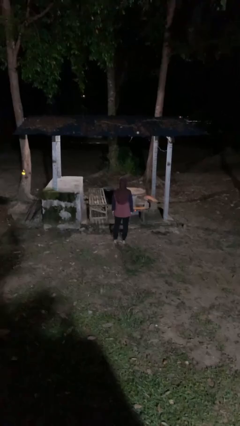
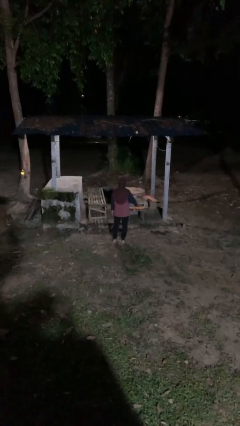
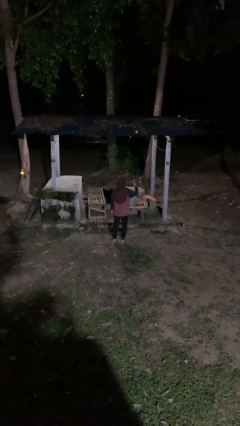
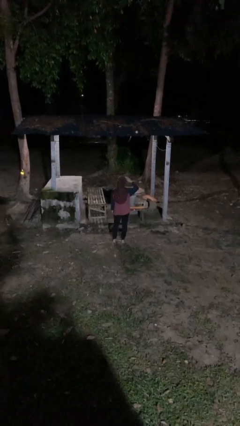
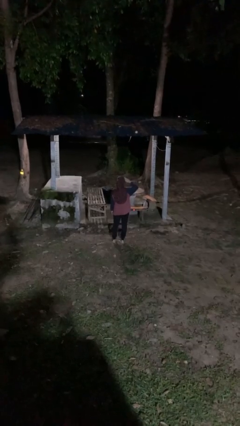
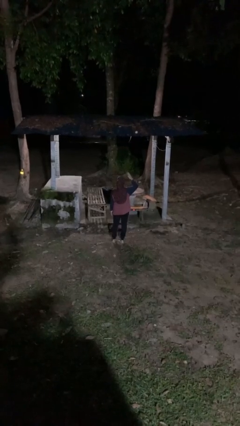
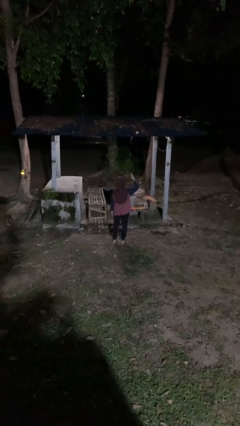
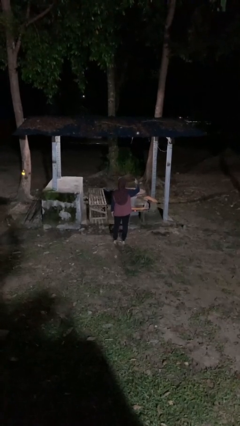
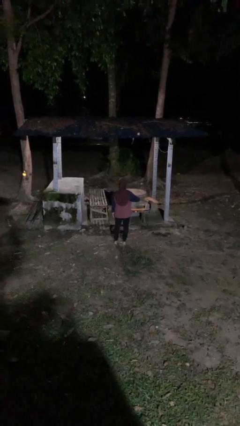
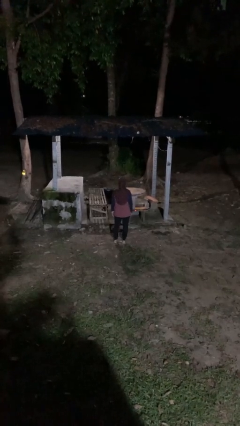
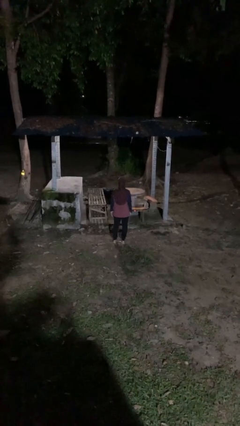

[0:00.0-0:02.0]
person salutes

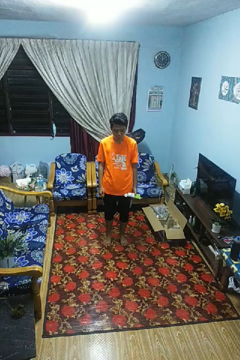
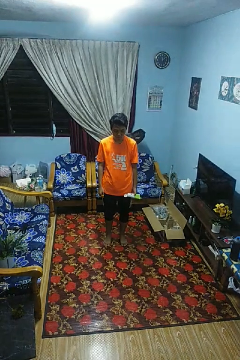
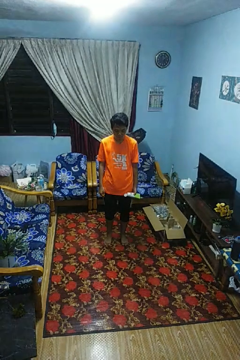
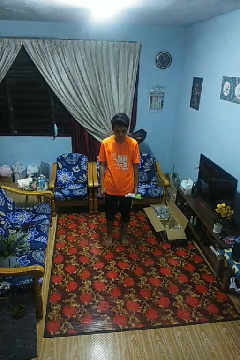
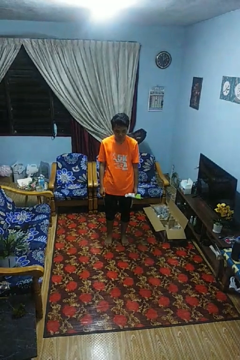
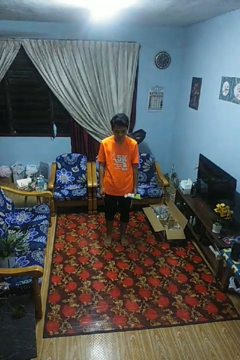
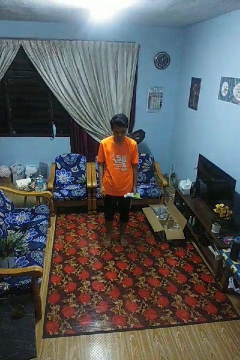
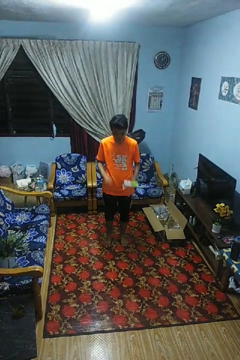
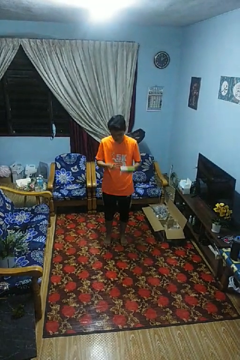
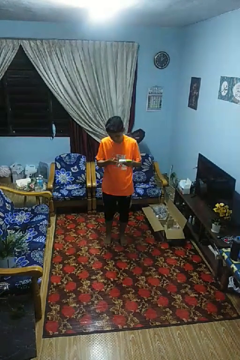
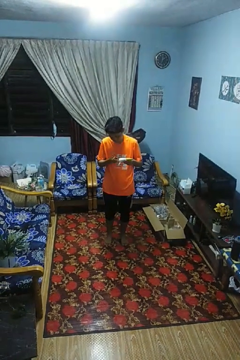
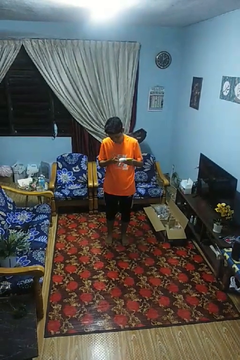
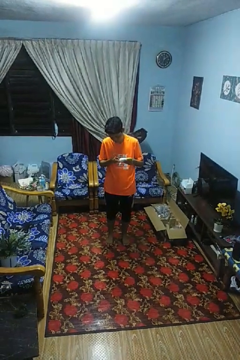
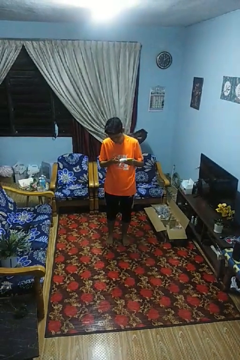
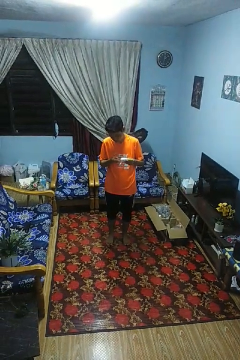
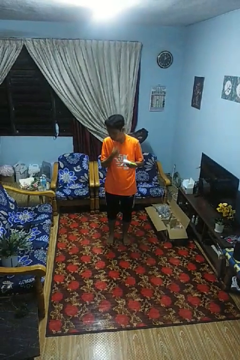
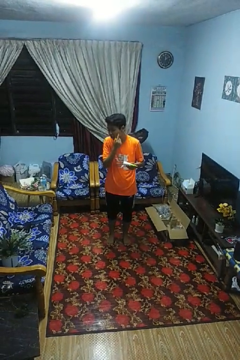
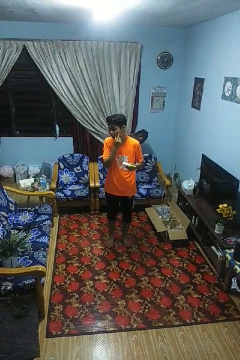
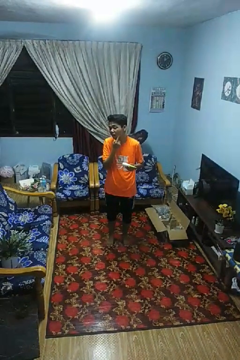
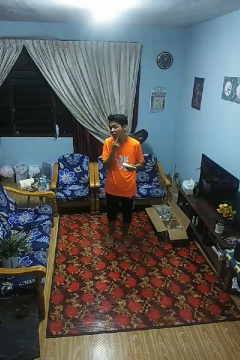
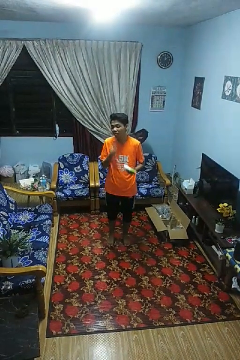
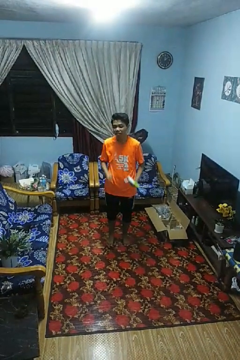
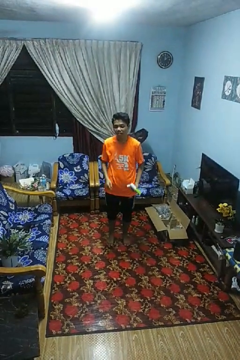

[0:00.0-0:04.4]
person applies shaving cream

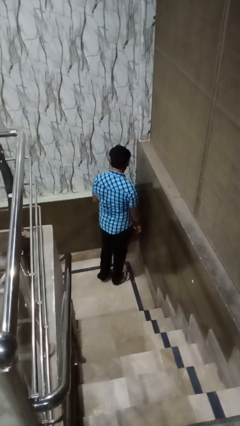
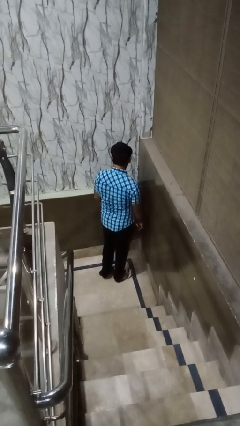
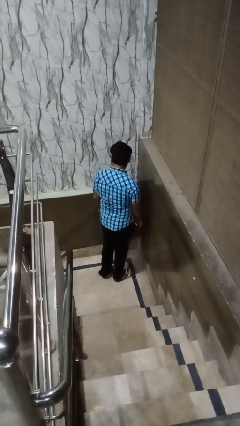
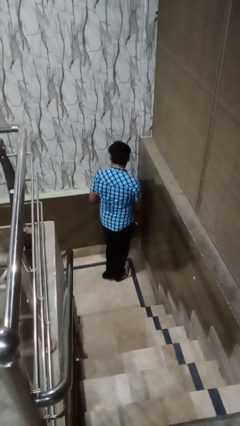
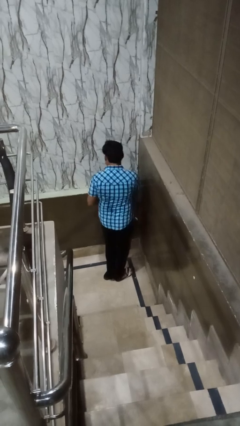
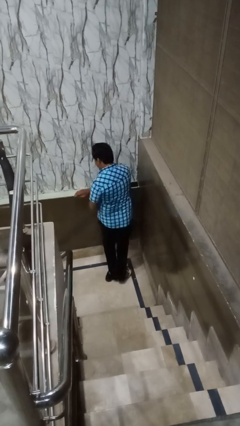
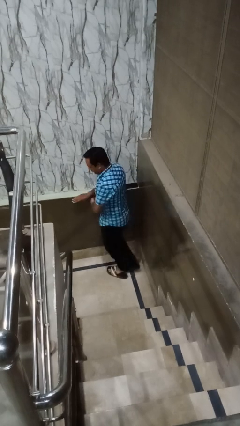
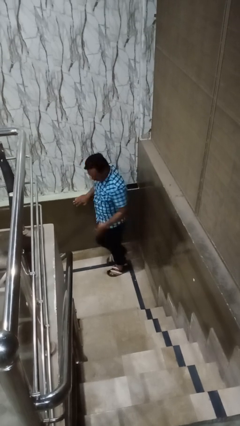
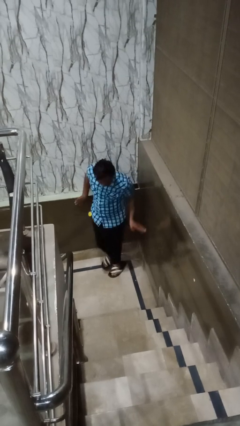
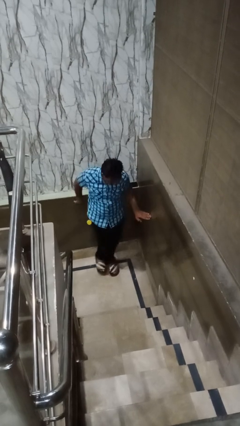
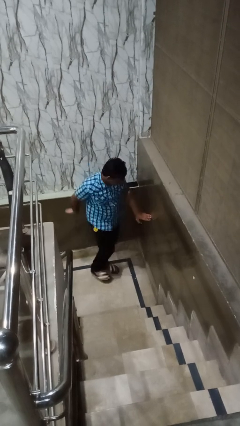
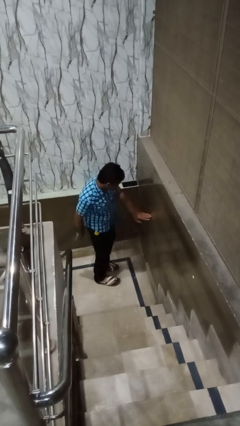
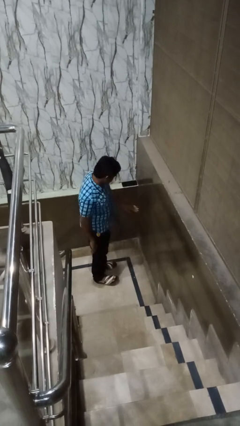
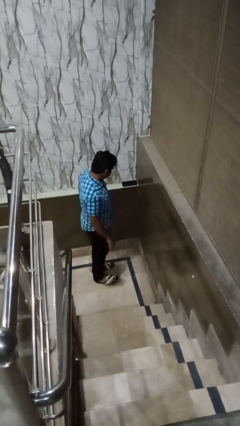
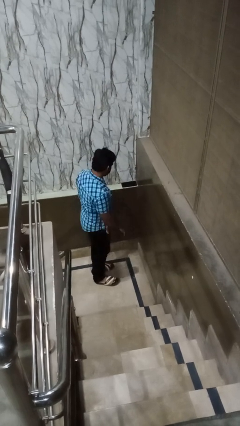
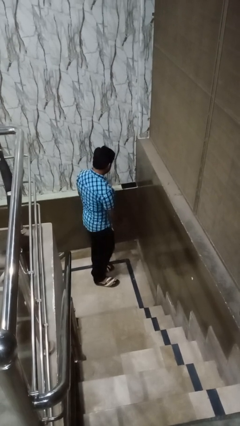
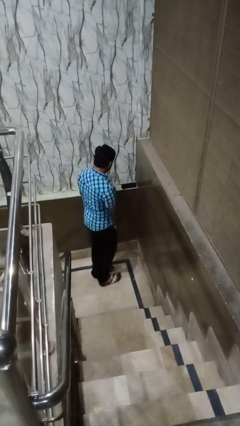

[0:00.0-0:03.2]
person twirls

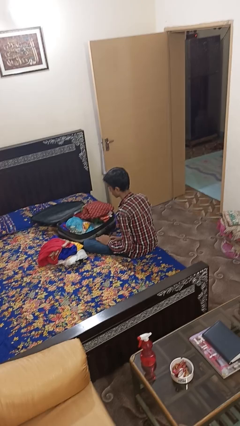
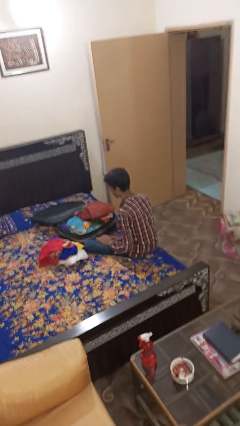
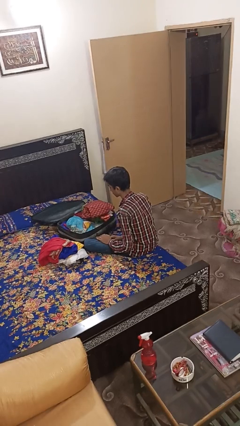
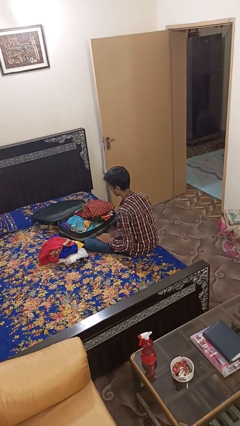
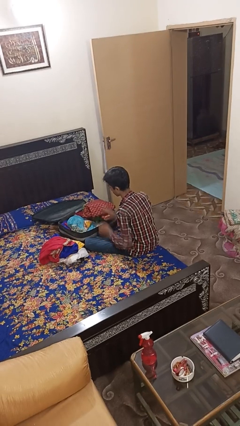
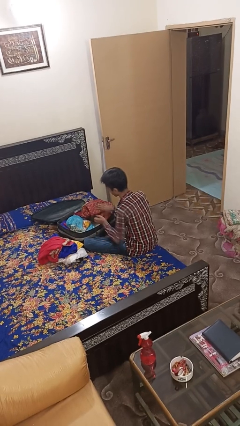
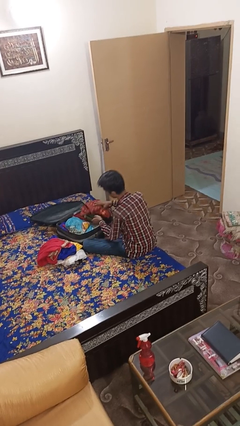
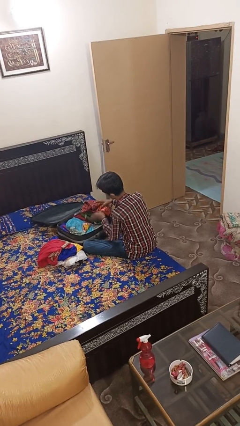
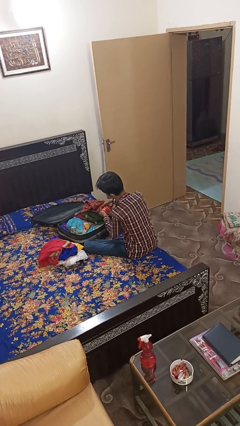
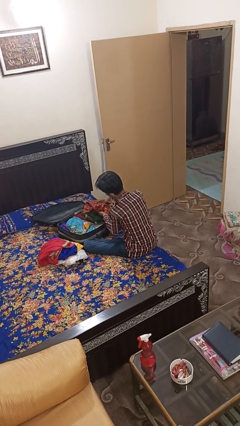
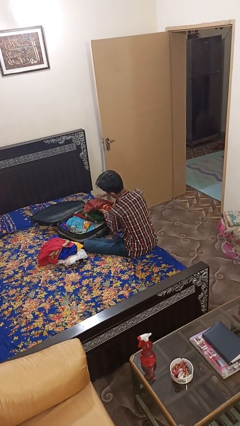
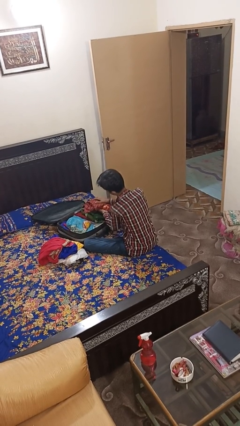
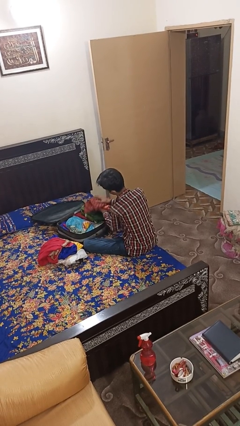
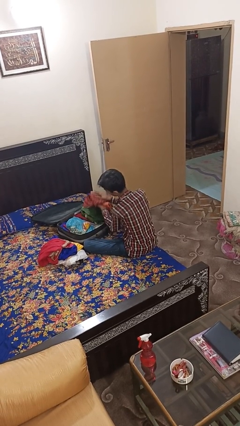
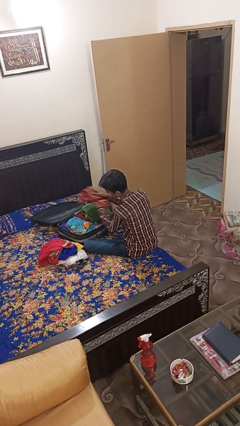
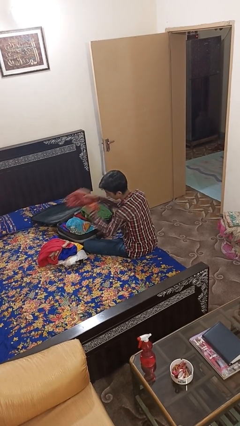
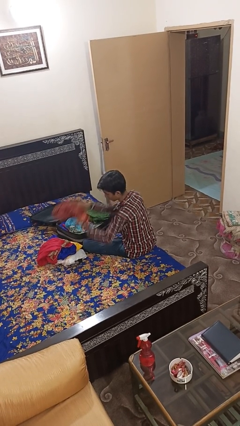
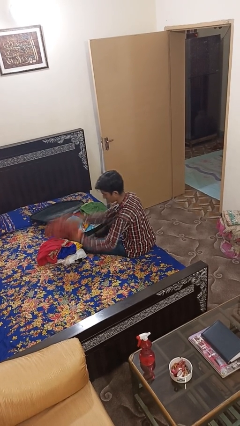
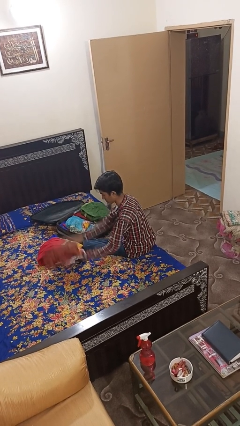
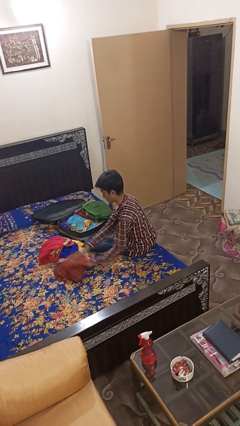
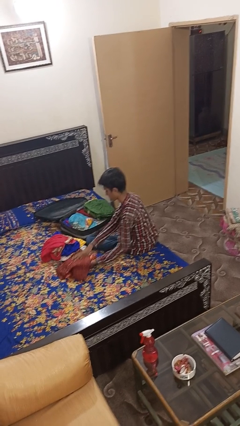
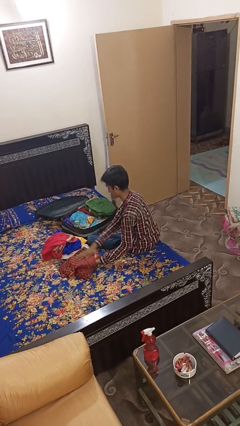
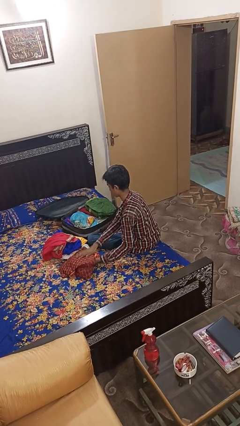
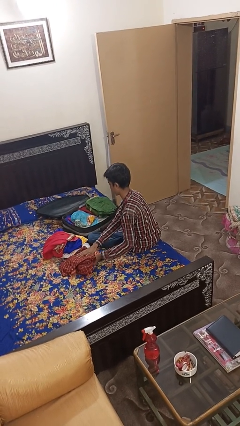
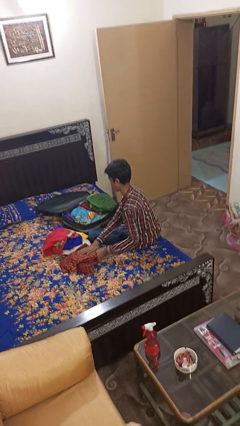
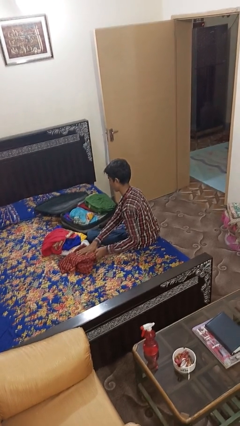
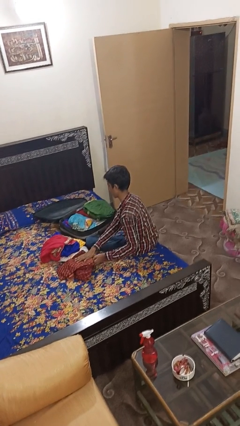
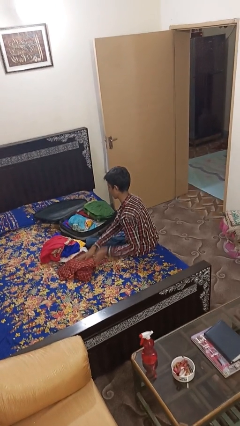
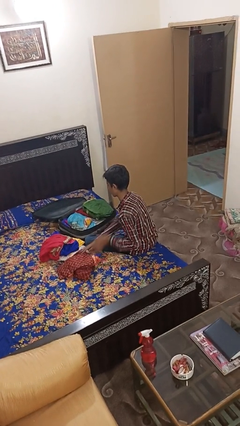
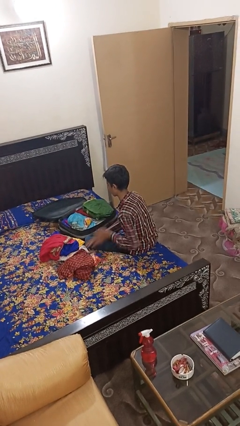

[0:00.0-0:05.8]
person unloads clothes from suitcase

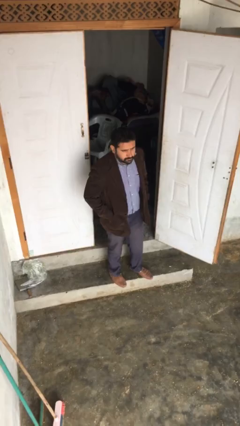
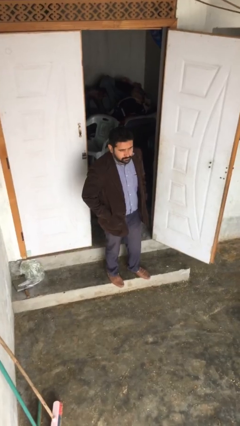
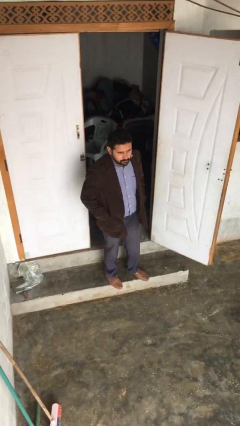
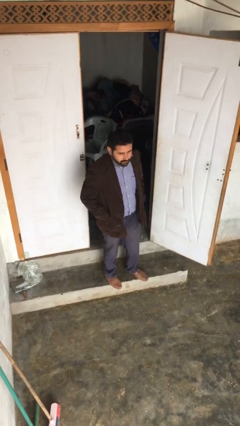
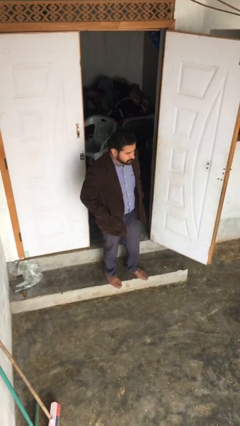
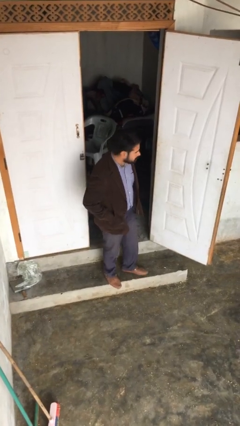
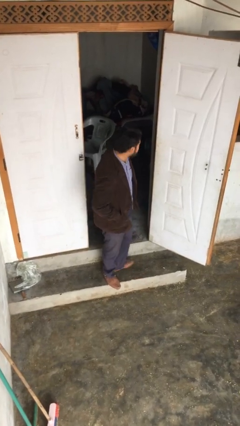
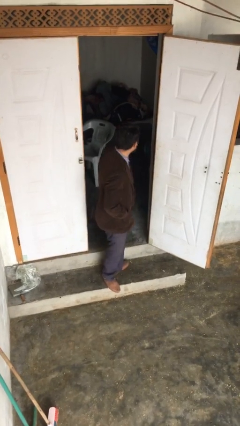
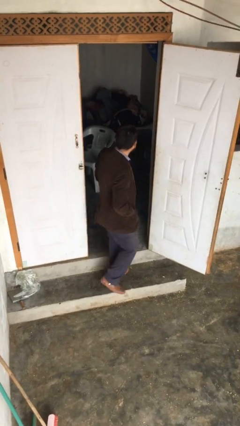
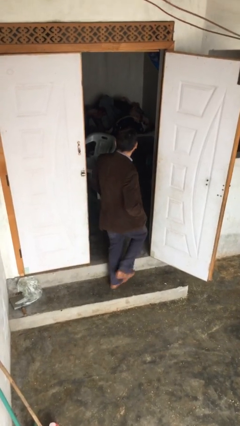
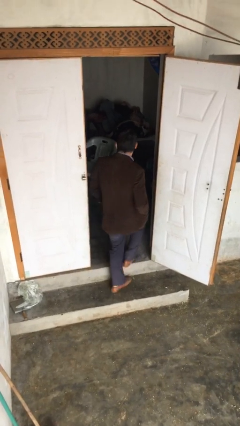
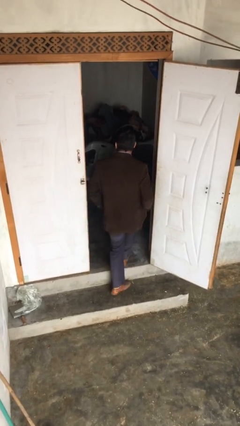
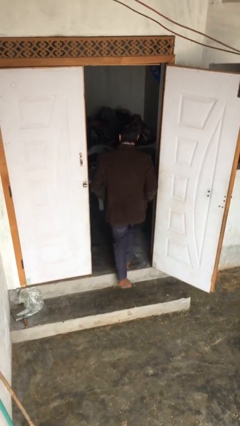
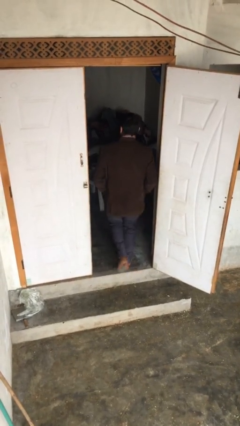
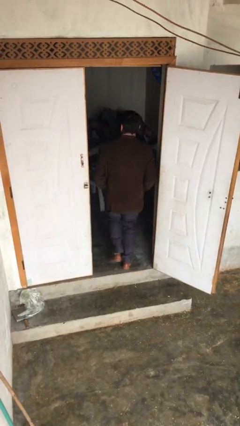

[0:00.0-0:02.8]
person exits scene through structure

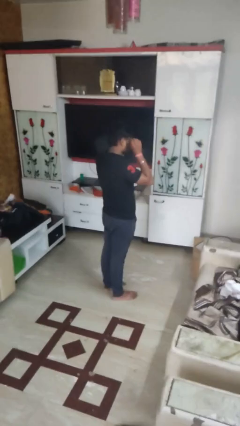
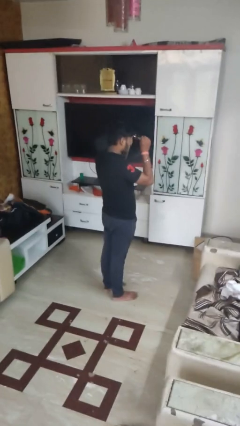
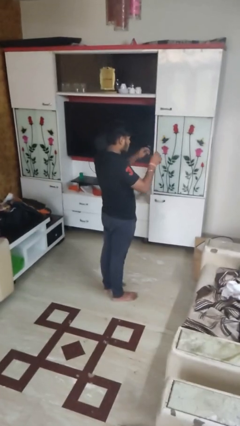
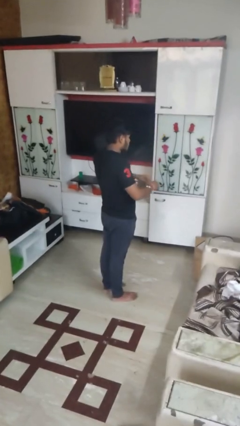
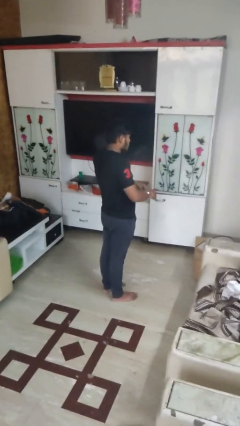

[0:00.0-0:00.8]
person takes off glasses
